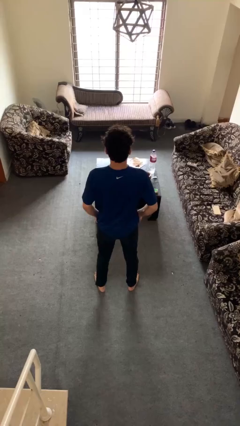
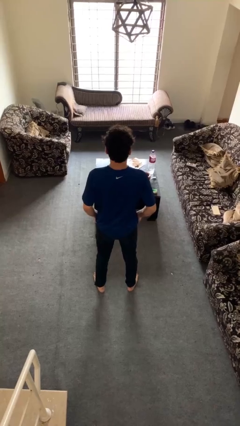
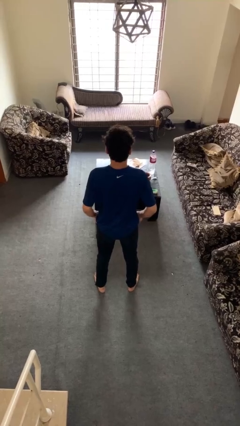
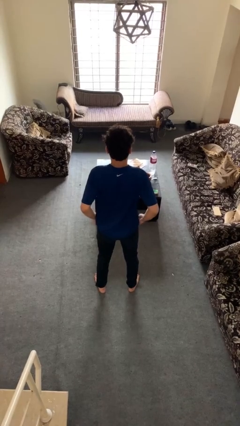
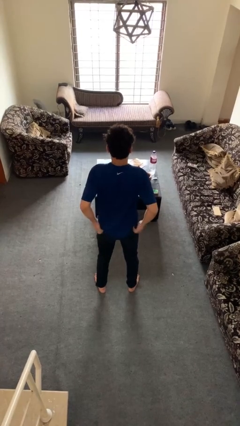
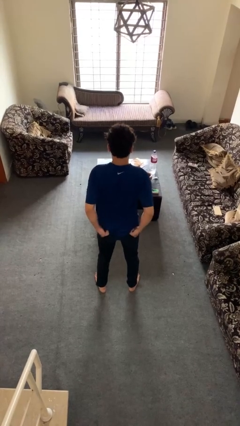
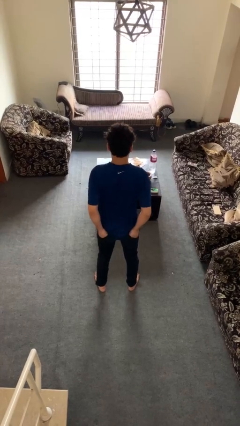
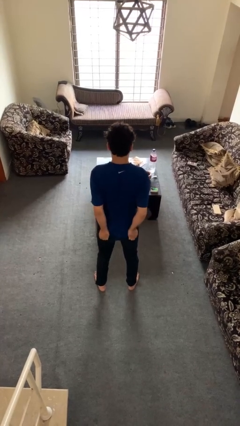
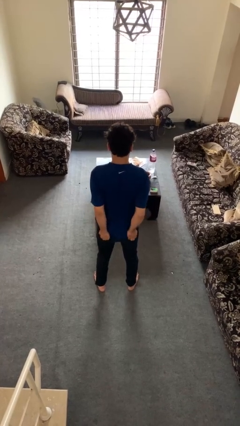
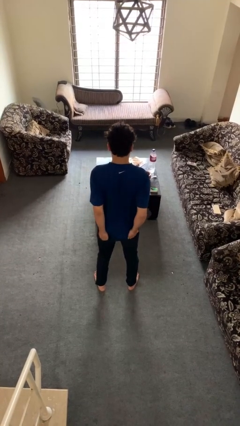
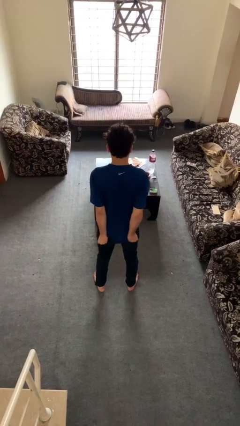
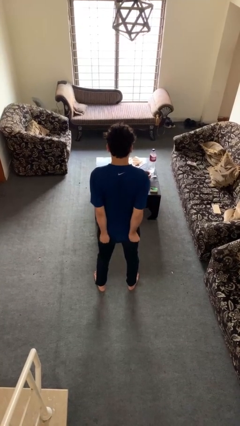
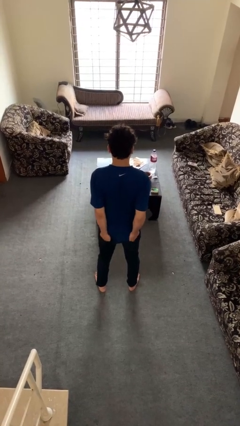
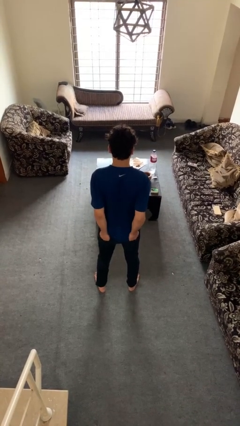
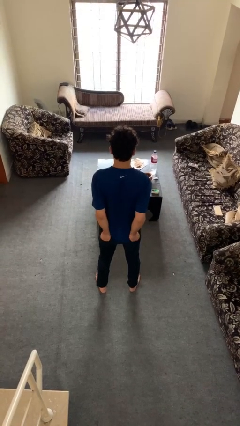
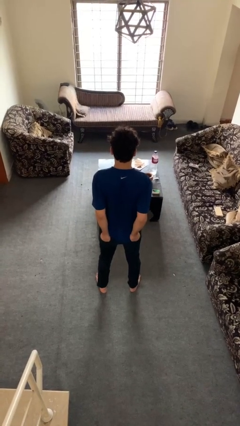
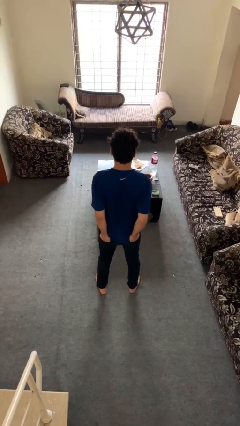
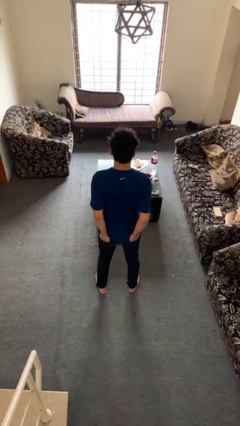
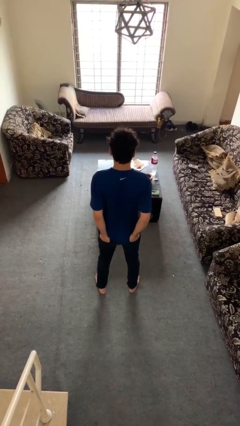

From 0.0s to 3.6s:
person puts hands in back pockets

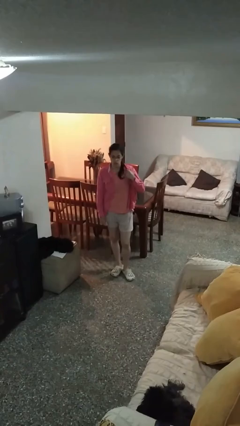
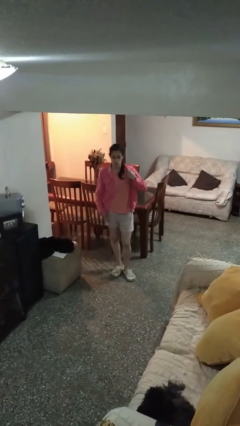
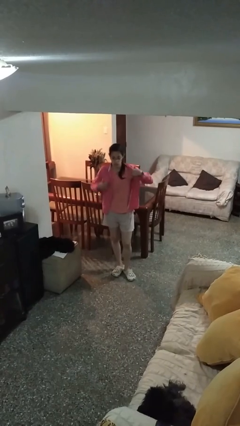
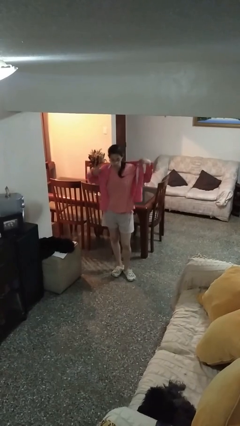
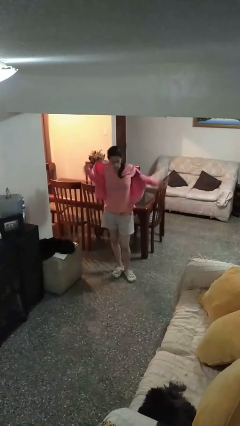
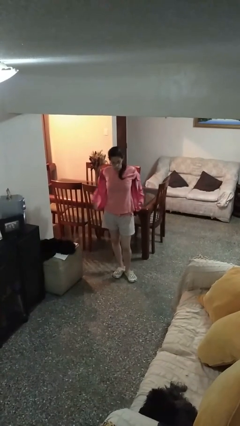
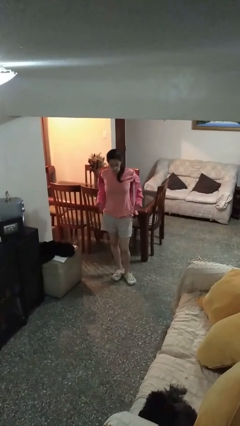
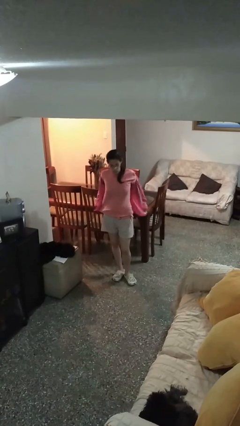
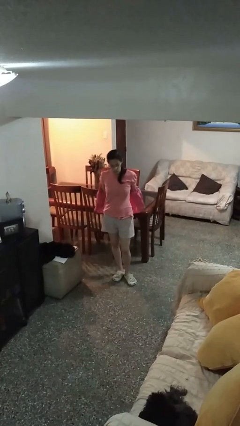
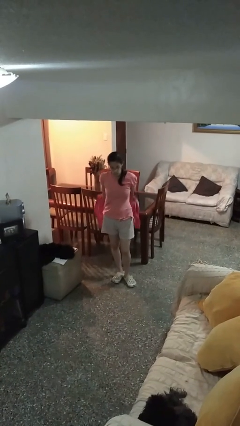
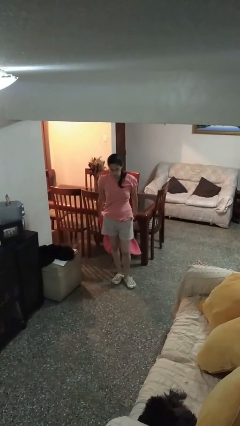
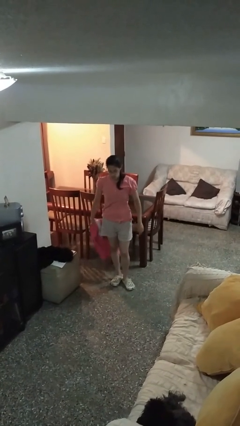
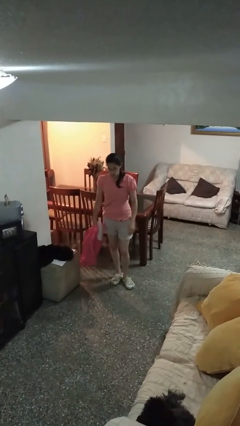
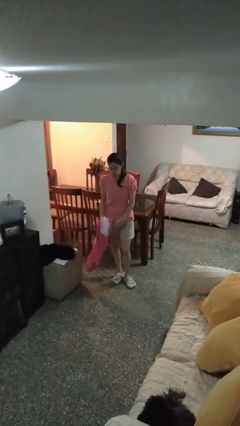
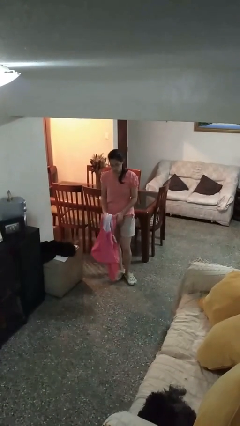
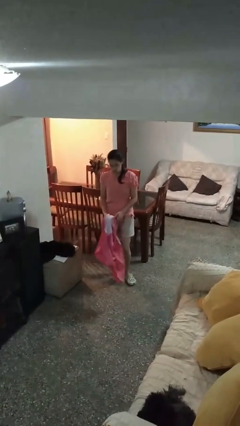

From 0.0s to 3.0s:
person takes off shirt

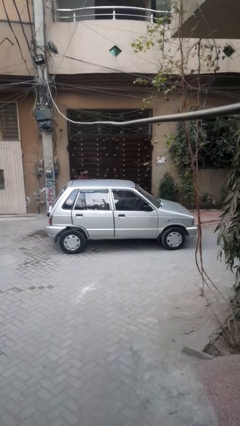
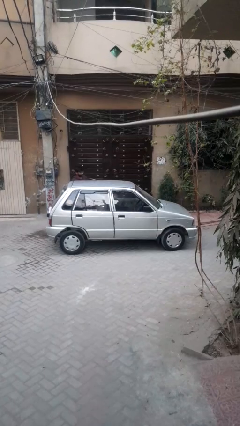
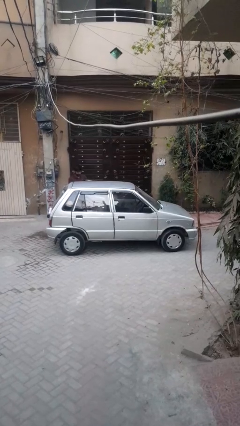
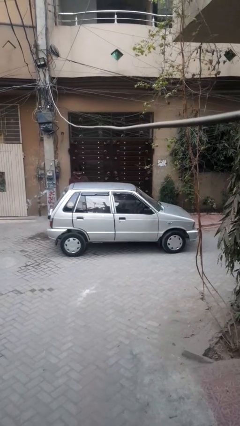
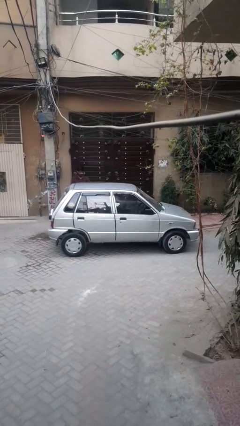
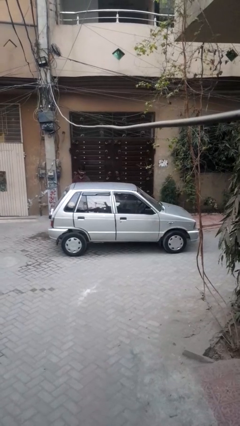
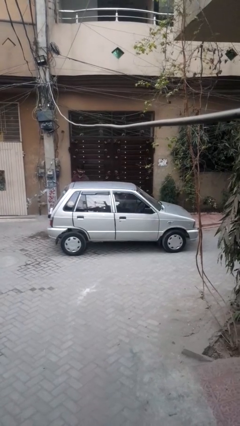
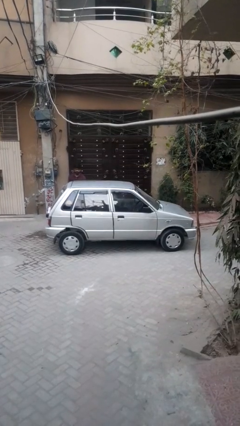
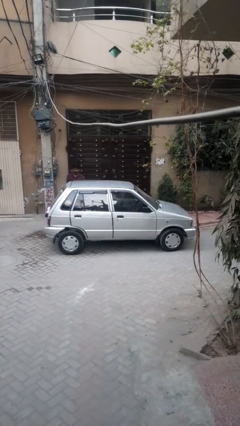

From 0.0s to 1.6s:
car drops off person

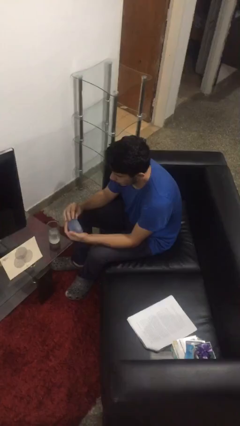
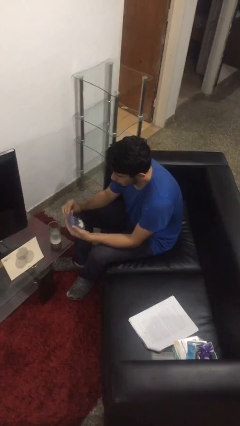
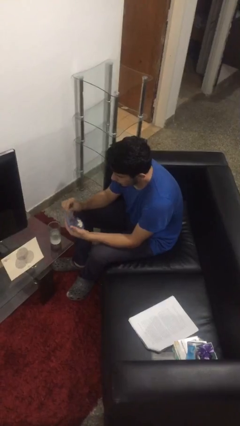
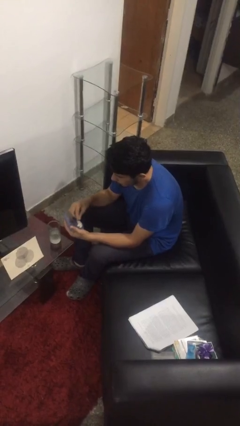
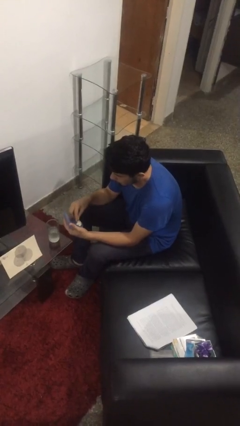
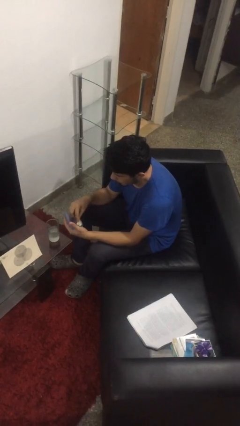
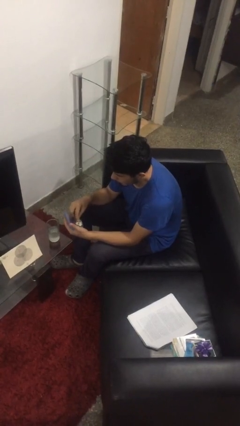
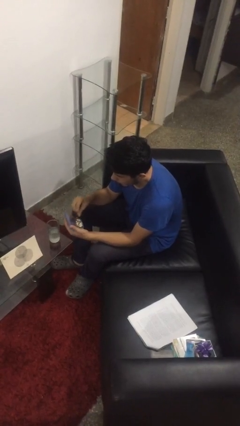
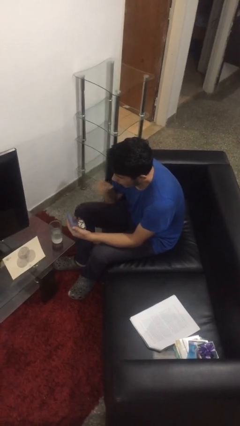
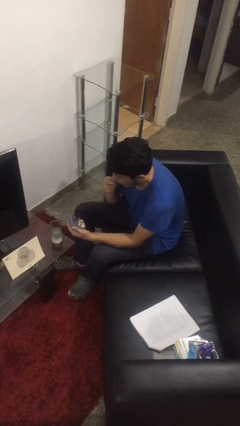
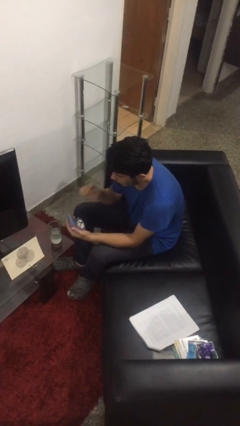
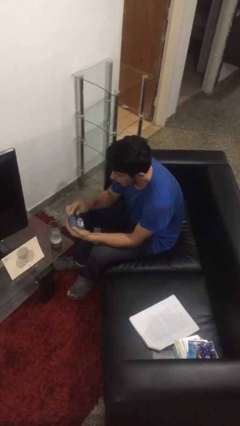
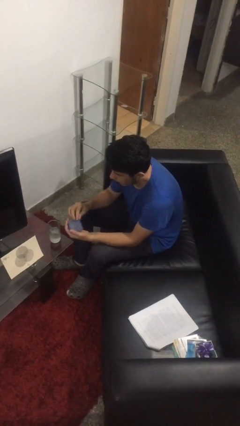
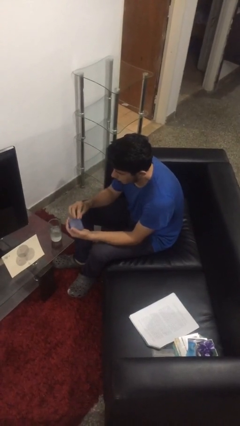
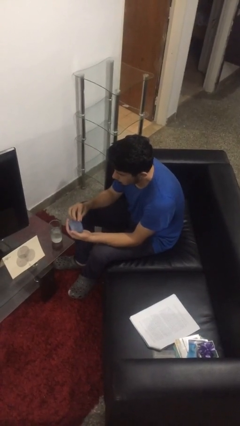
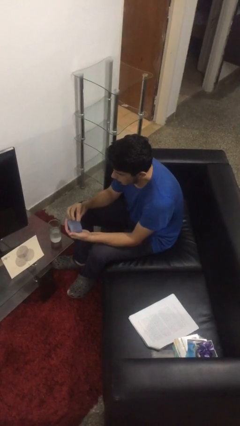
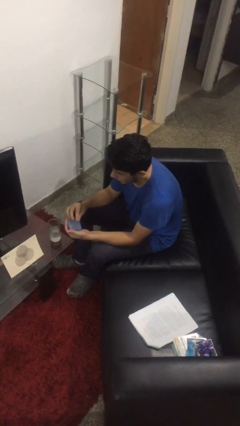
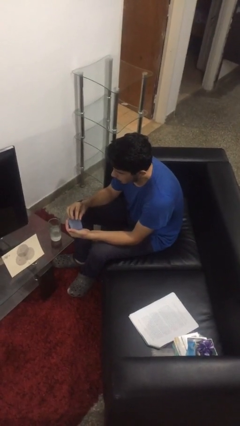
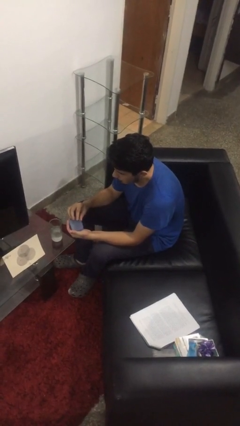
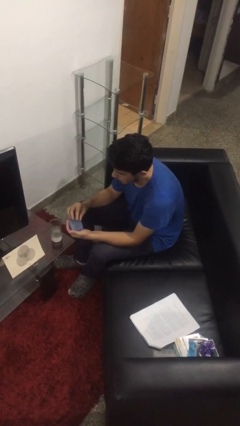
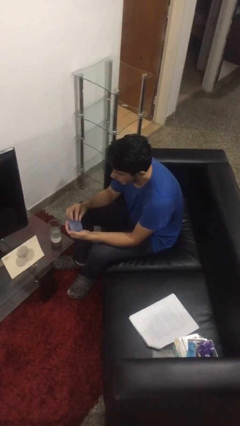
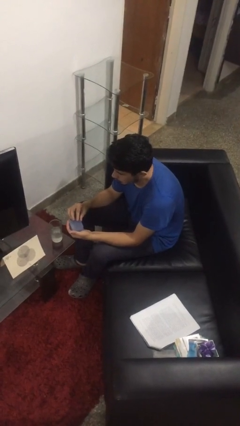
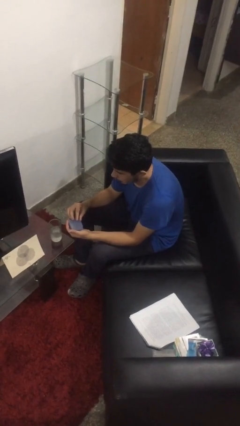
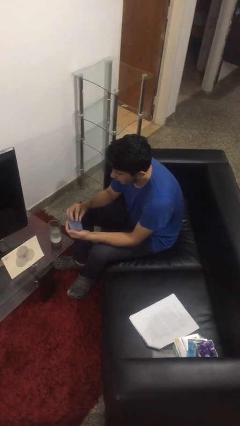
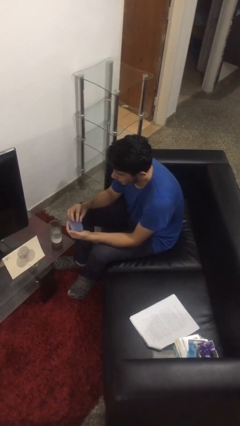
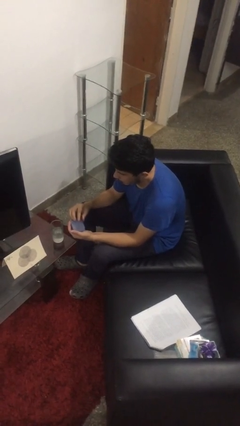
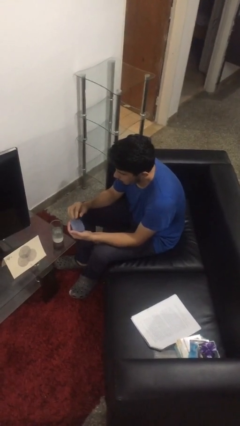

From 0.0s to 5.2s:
person takes medicine pills

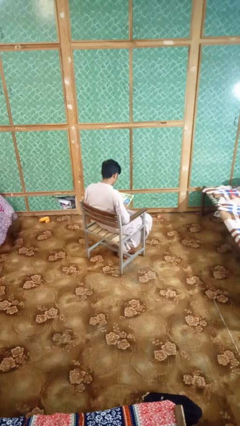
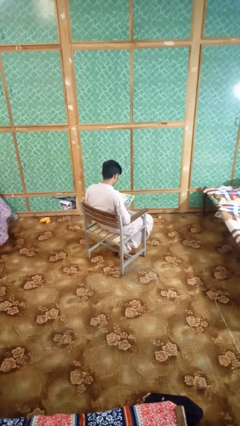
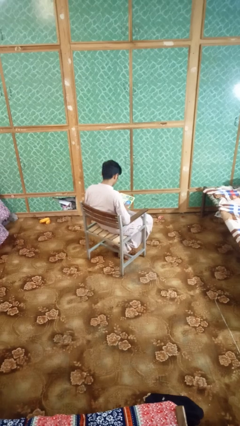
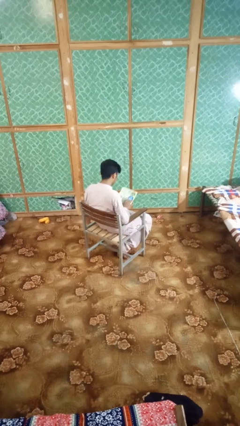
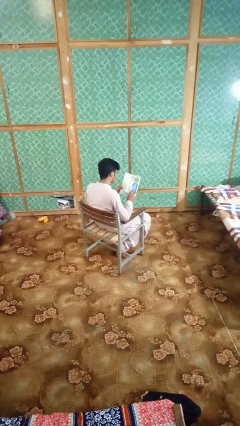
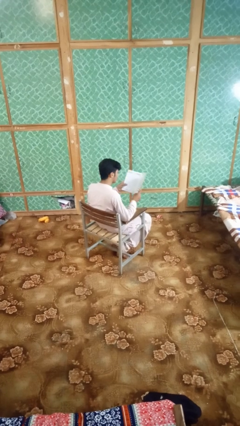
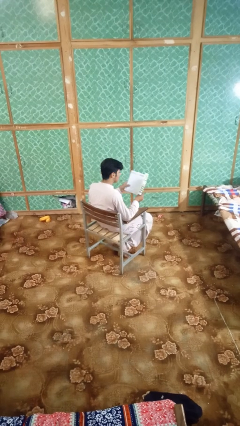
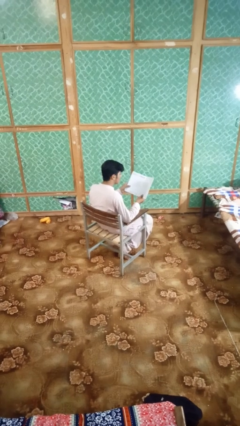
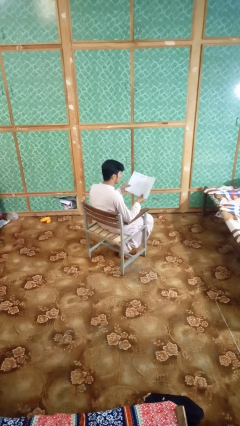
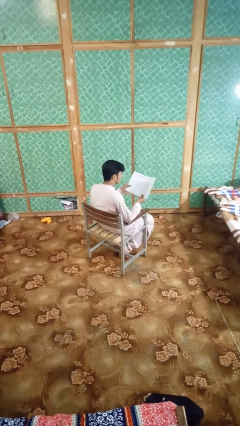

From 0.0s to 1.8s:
person reads magazine

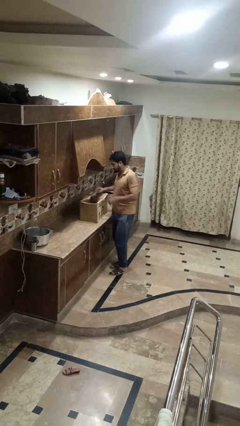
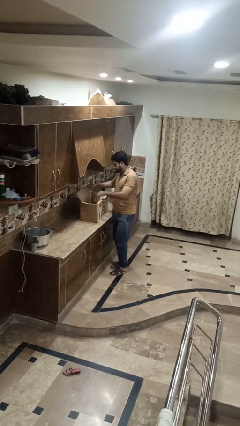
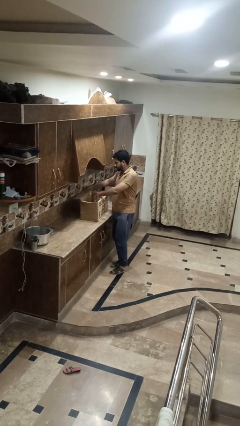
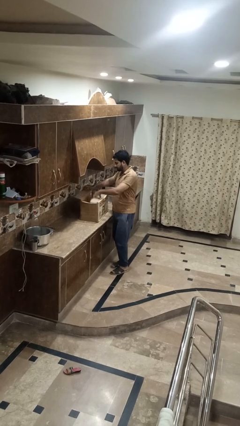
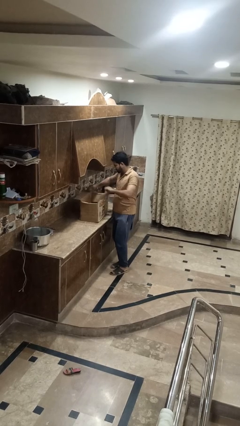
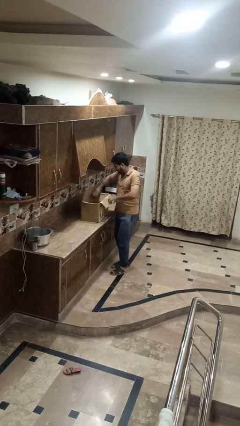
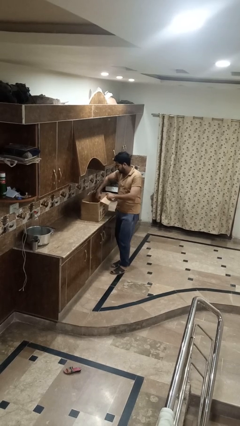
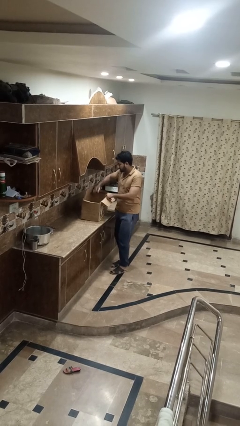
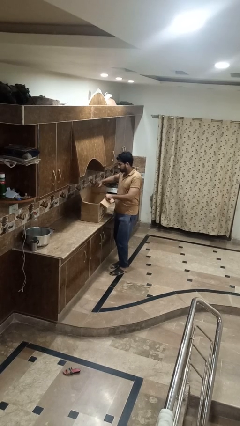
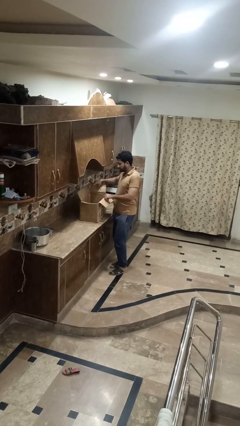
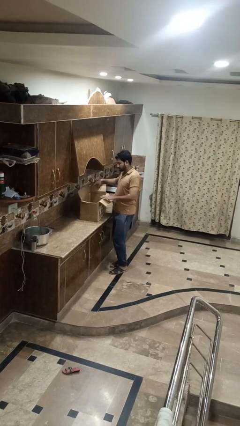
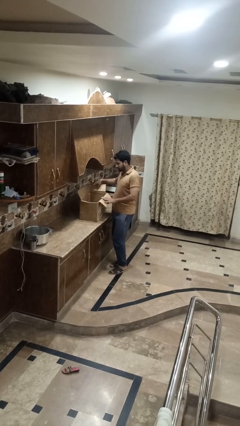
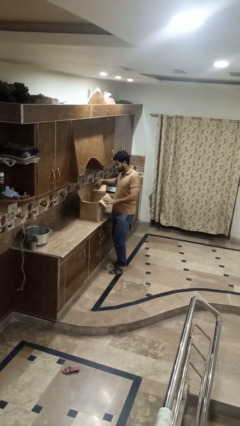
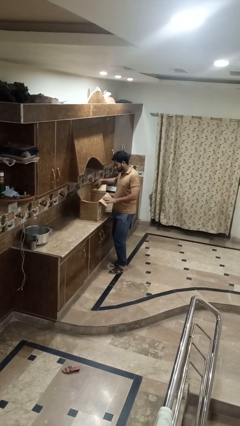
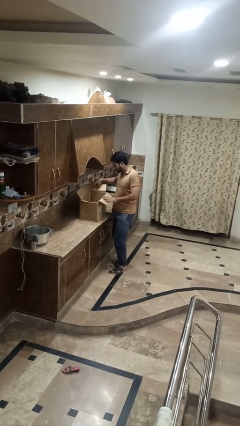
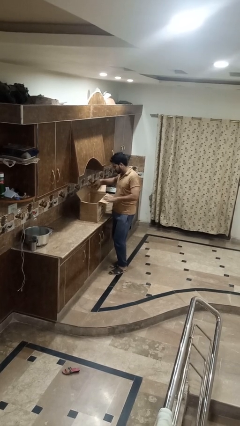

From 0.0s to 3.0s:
person opens box
